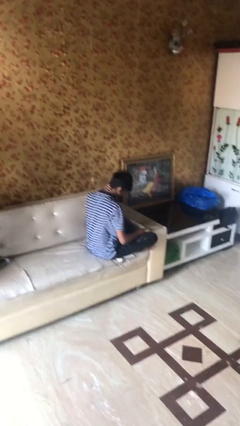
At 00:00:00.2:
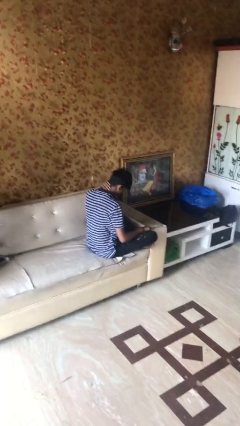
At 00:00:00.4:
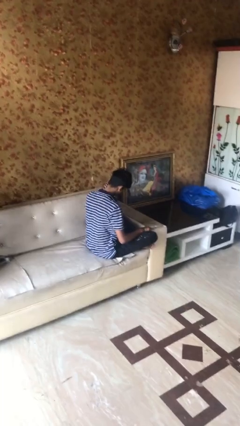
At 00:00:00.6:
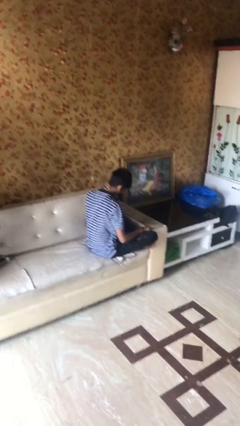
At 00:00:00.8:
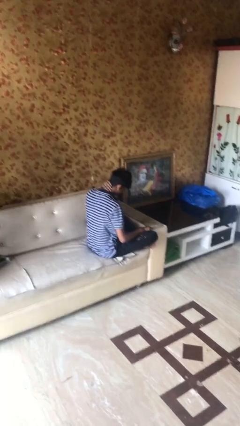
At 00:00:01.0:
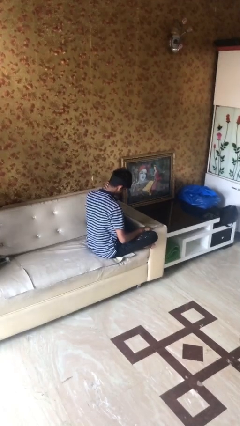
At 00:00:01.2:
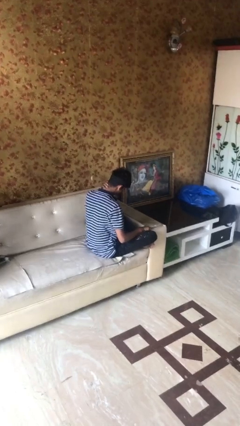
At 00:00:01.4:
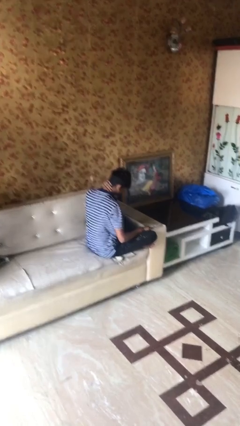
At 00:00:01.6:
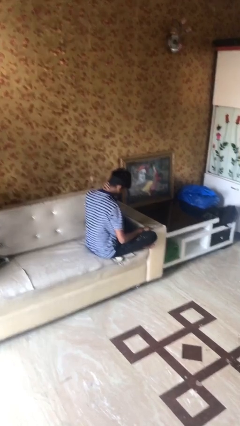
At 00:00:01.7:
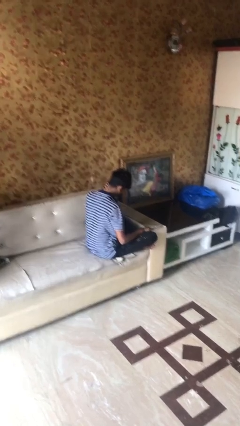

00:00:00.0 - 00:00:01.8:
person rubs neck

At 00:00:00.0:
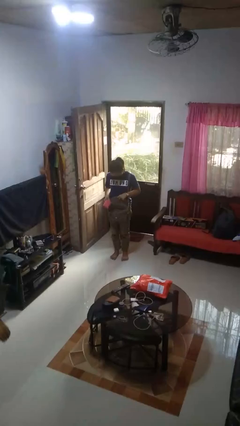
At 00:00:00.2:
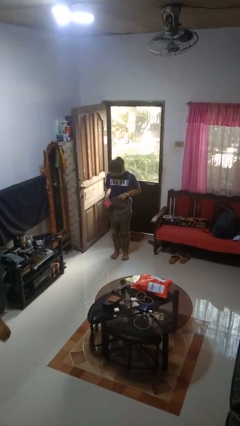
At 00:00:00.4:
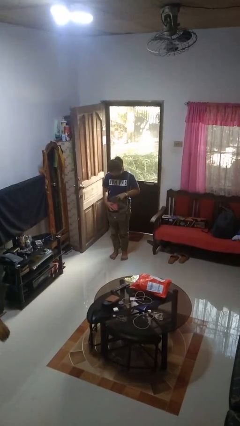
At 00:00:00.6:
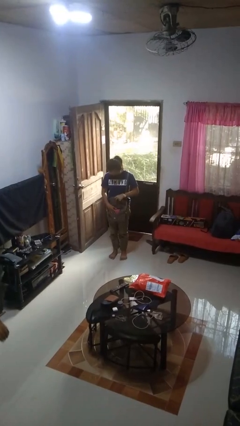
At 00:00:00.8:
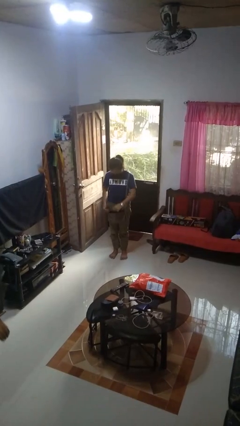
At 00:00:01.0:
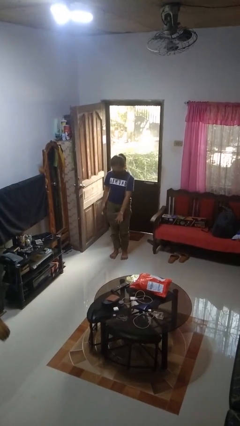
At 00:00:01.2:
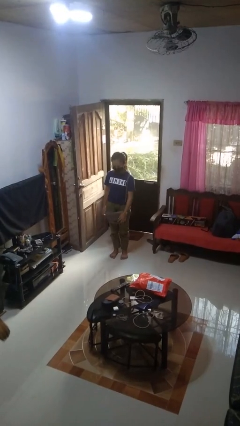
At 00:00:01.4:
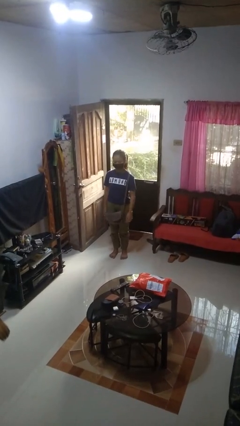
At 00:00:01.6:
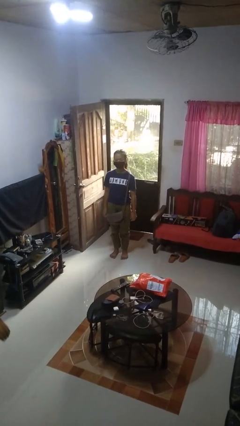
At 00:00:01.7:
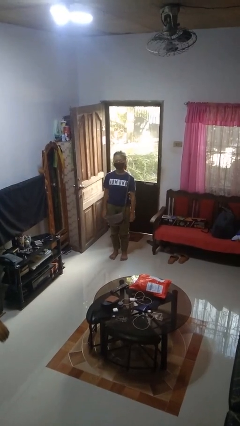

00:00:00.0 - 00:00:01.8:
person puts object into purse

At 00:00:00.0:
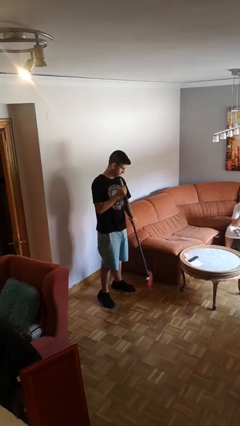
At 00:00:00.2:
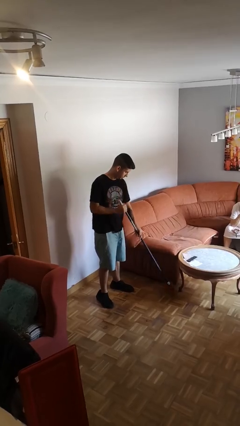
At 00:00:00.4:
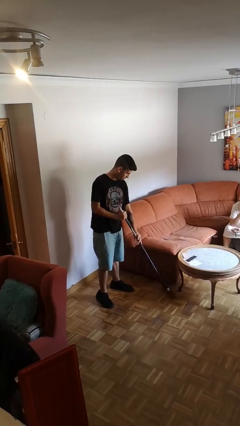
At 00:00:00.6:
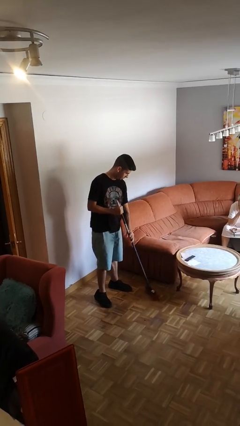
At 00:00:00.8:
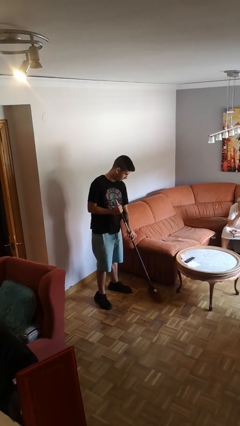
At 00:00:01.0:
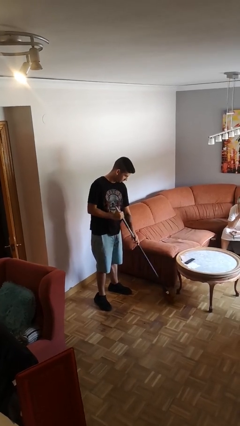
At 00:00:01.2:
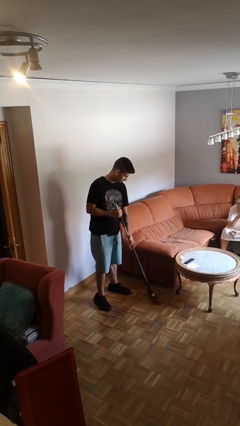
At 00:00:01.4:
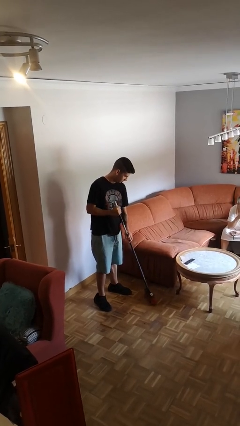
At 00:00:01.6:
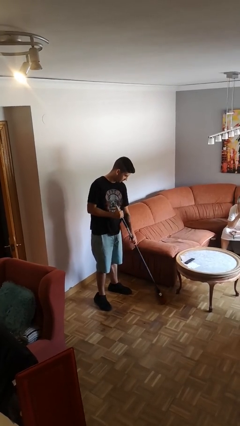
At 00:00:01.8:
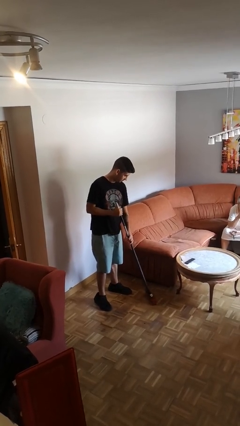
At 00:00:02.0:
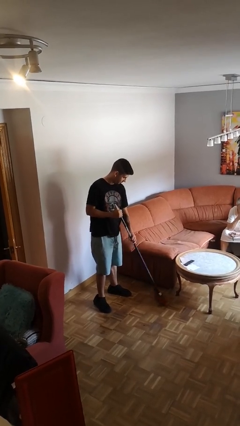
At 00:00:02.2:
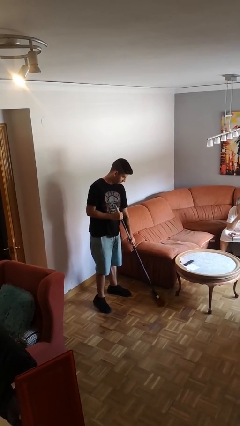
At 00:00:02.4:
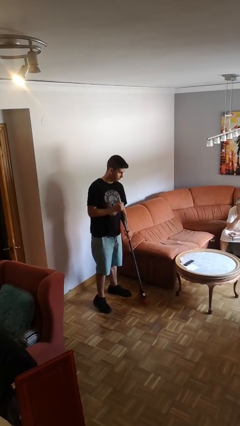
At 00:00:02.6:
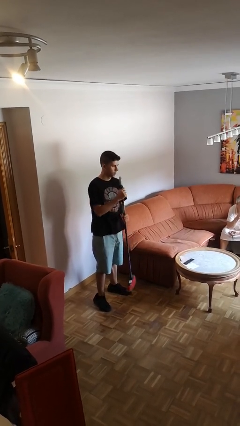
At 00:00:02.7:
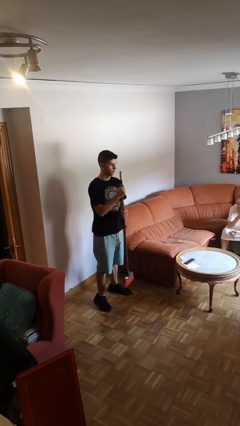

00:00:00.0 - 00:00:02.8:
person sweeps floor

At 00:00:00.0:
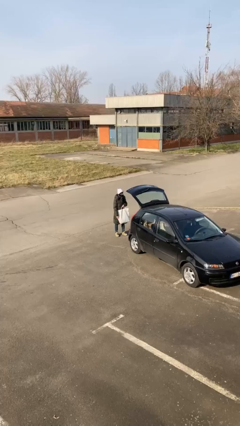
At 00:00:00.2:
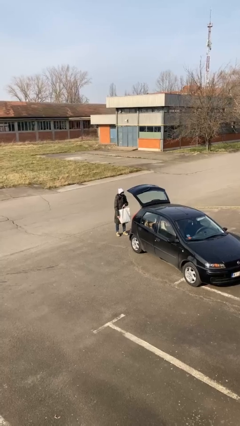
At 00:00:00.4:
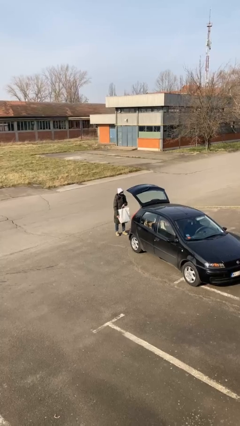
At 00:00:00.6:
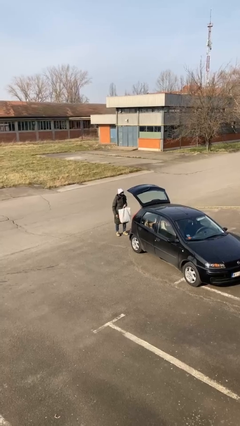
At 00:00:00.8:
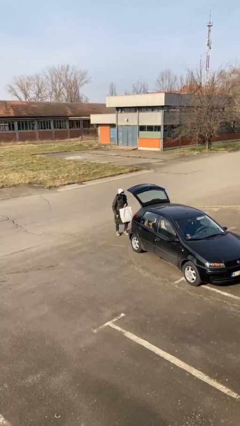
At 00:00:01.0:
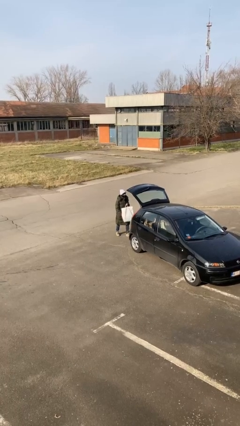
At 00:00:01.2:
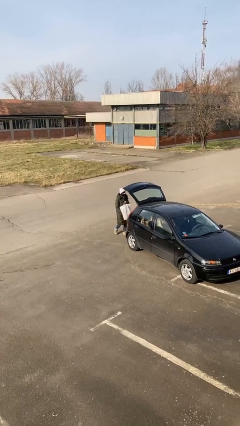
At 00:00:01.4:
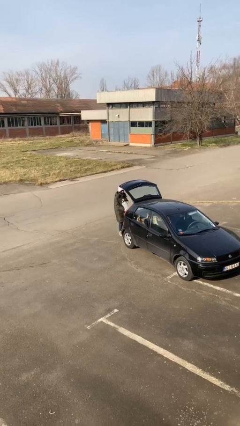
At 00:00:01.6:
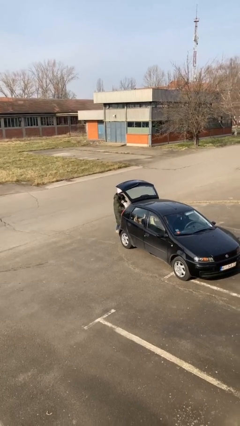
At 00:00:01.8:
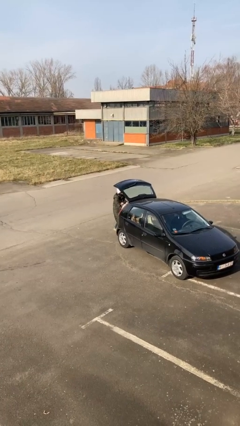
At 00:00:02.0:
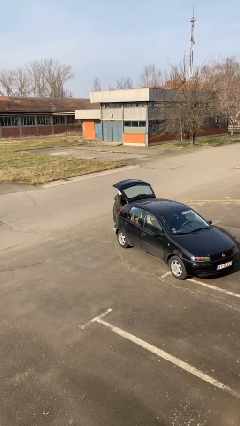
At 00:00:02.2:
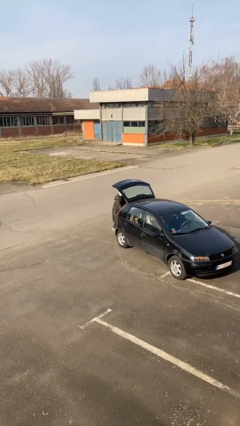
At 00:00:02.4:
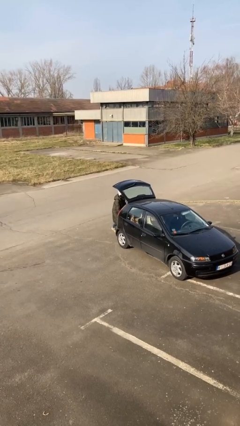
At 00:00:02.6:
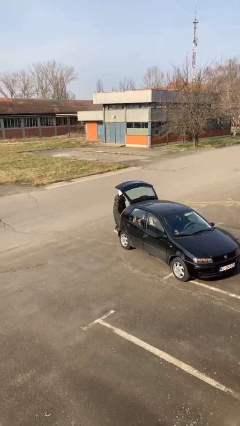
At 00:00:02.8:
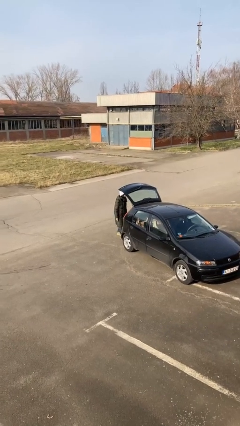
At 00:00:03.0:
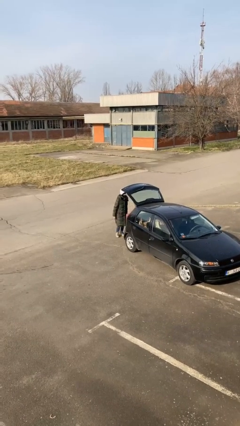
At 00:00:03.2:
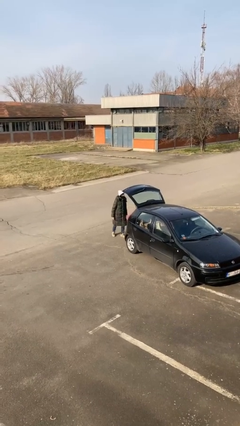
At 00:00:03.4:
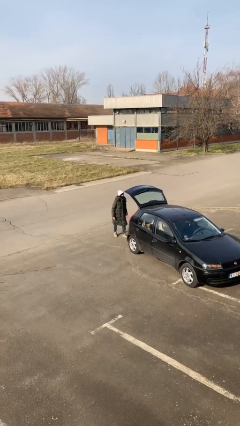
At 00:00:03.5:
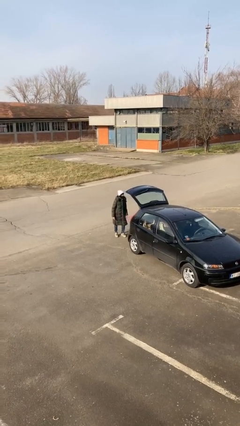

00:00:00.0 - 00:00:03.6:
person loads car

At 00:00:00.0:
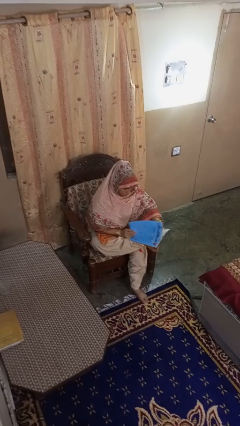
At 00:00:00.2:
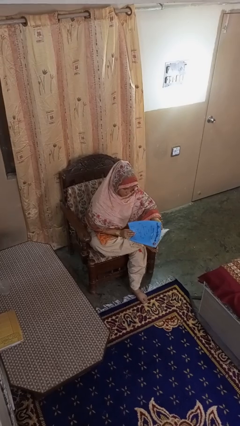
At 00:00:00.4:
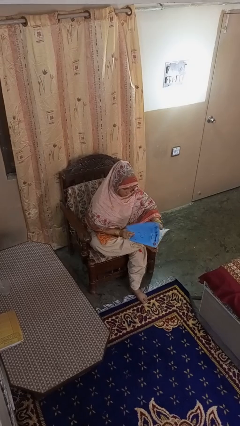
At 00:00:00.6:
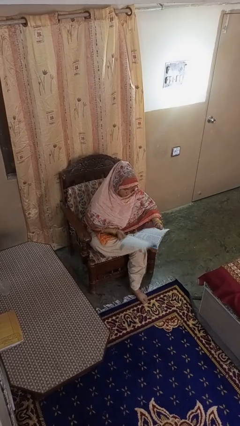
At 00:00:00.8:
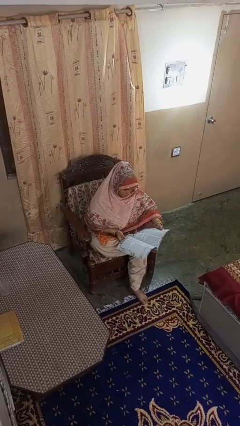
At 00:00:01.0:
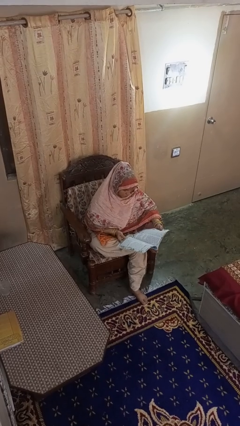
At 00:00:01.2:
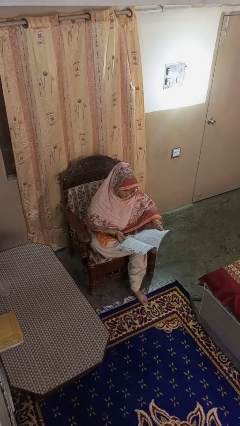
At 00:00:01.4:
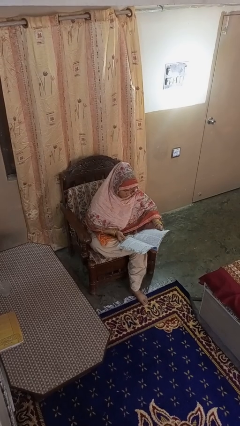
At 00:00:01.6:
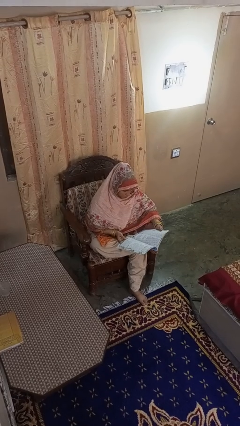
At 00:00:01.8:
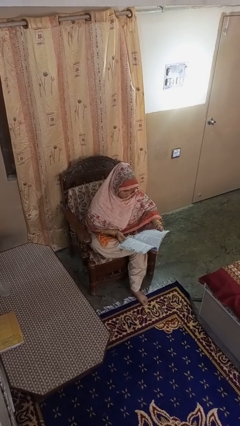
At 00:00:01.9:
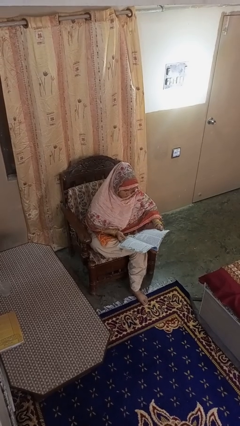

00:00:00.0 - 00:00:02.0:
person reads magazine

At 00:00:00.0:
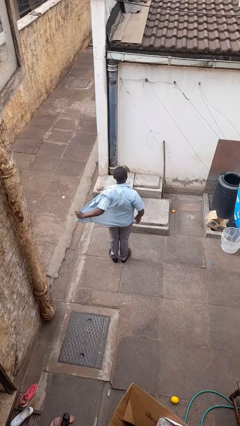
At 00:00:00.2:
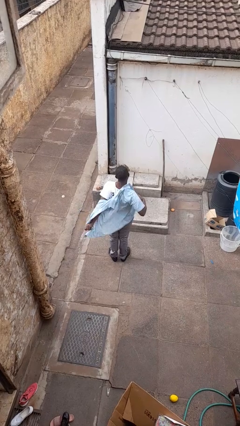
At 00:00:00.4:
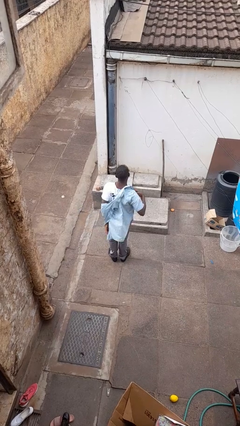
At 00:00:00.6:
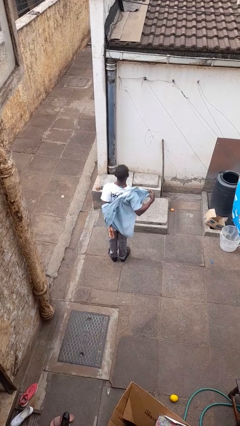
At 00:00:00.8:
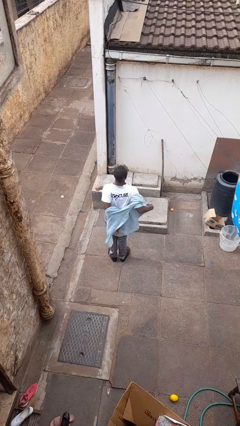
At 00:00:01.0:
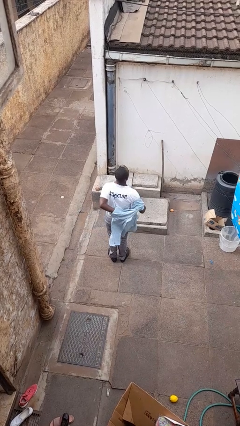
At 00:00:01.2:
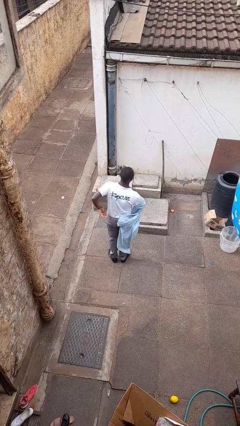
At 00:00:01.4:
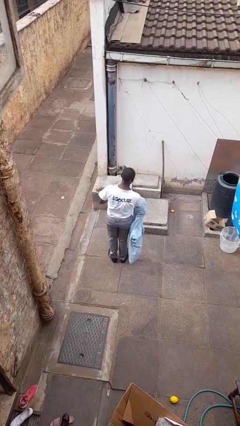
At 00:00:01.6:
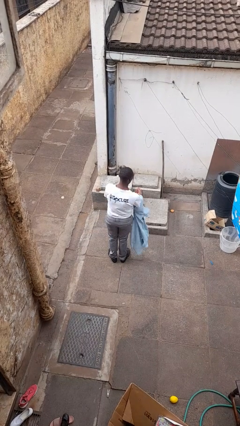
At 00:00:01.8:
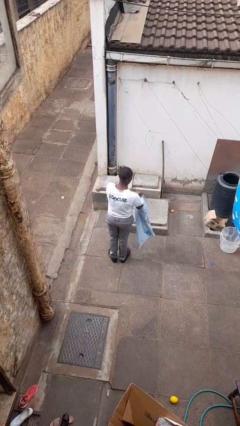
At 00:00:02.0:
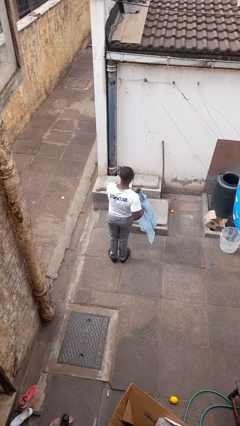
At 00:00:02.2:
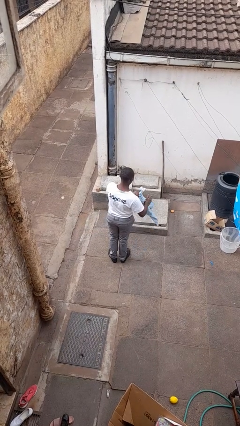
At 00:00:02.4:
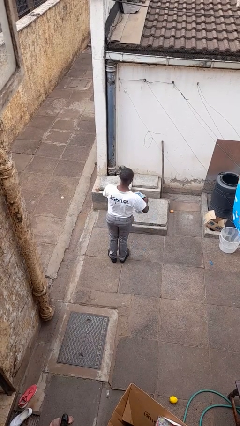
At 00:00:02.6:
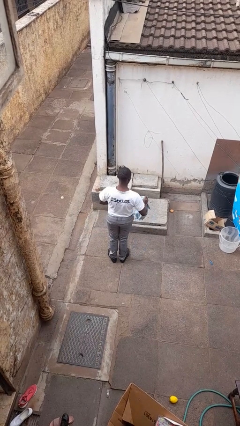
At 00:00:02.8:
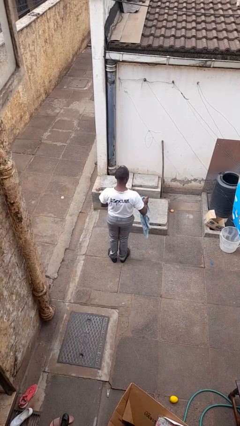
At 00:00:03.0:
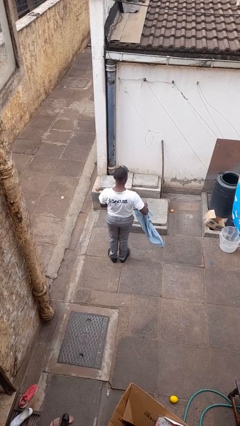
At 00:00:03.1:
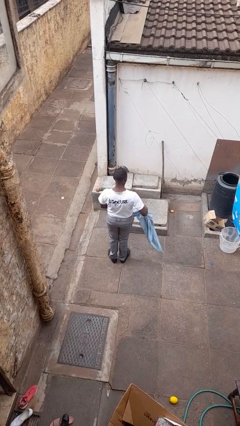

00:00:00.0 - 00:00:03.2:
person takes off shirt

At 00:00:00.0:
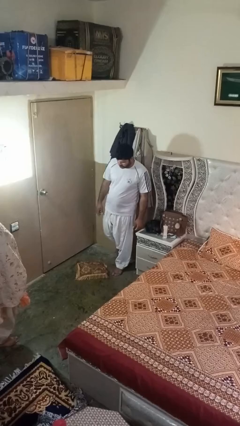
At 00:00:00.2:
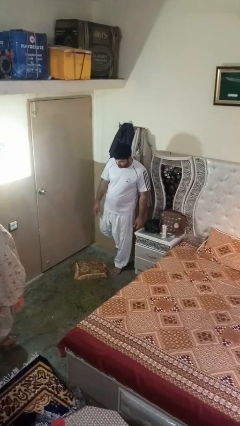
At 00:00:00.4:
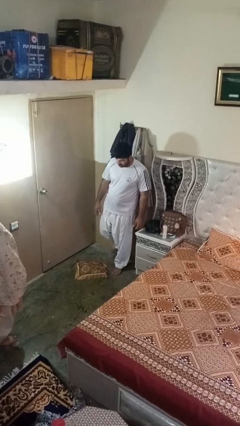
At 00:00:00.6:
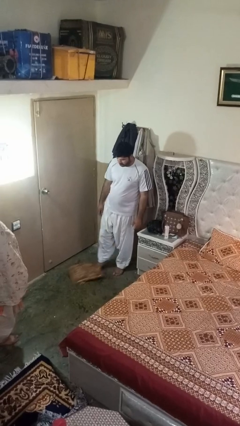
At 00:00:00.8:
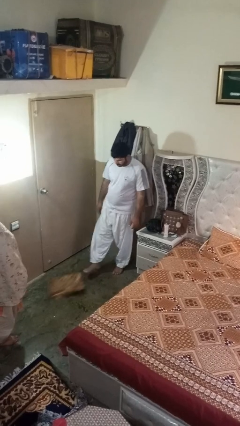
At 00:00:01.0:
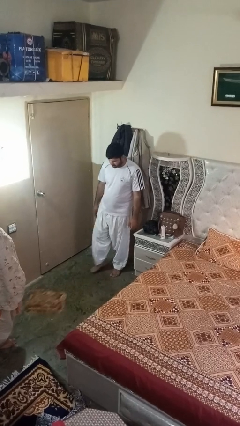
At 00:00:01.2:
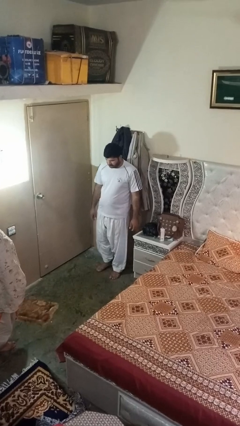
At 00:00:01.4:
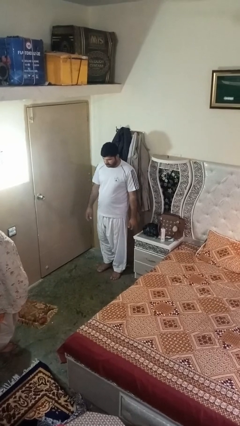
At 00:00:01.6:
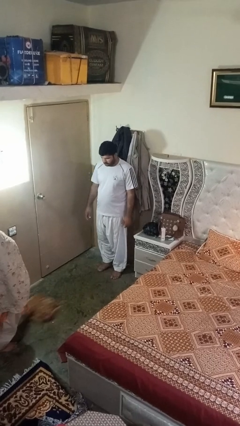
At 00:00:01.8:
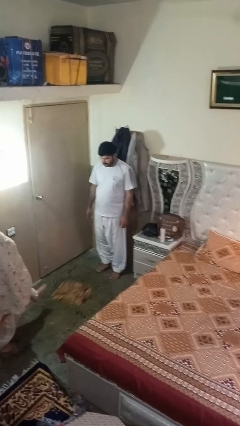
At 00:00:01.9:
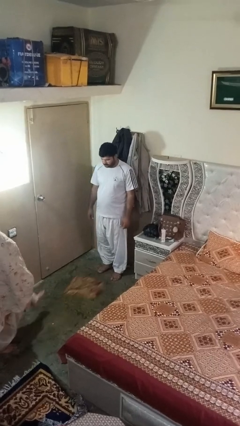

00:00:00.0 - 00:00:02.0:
person kicks object to person
